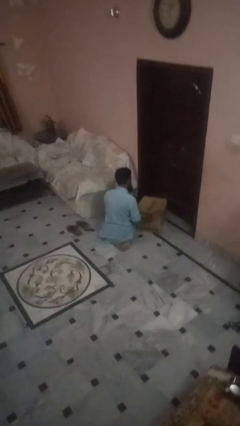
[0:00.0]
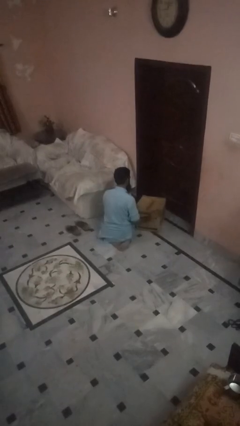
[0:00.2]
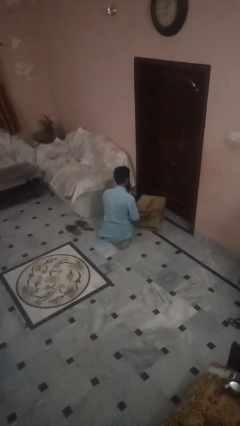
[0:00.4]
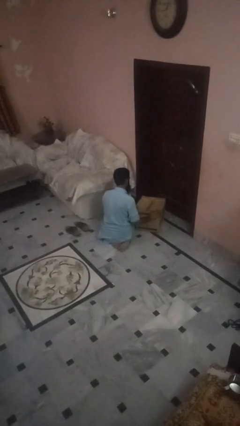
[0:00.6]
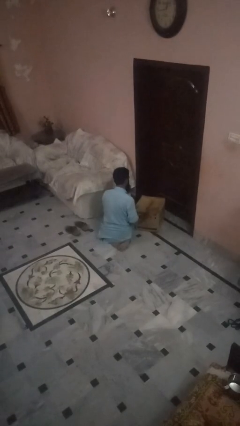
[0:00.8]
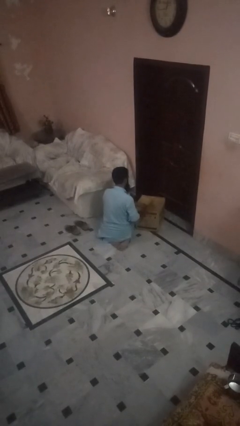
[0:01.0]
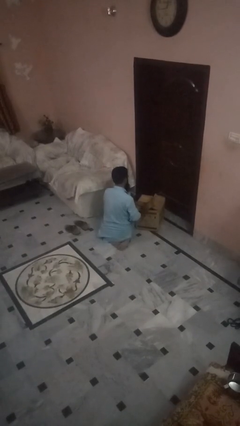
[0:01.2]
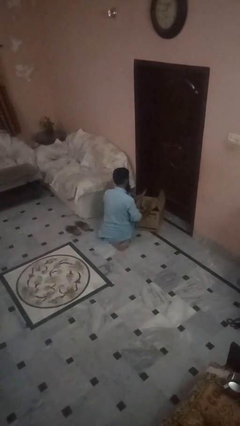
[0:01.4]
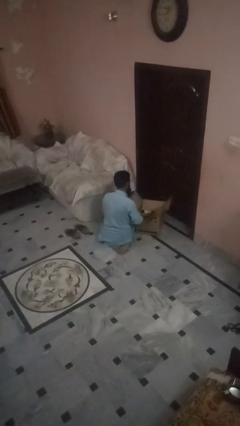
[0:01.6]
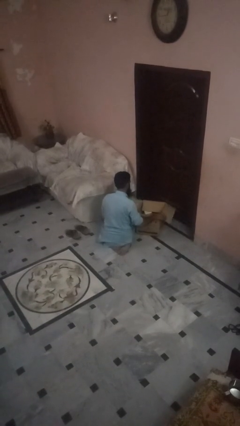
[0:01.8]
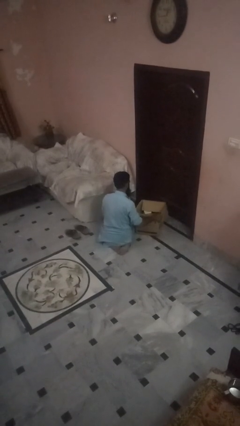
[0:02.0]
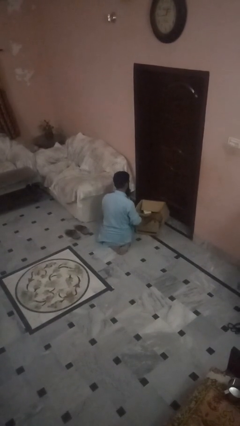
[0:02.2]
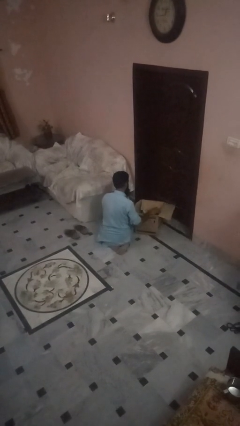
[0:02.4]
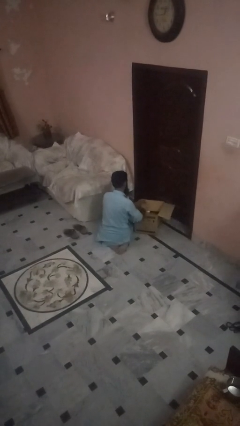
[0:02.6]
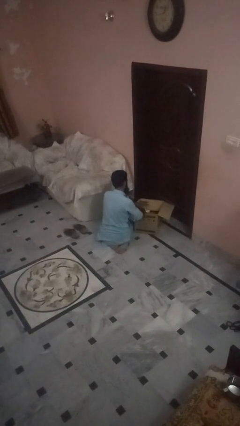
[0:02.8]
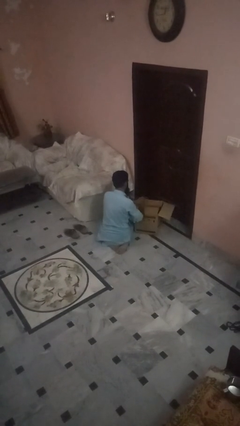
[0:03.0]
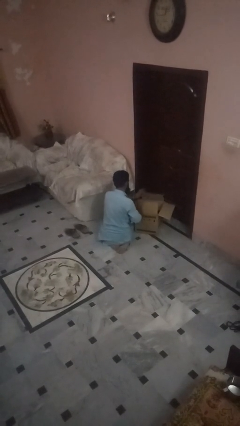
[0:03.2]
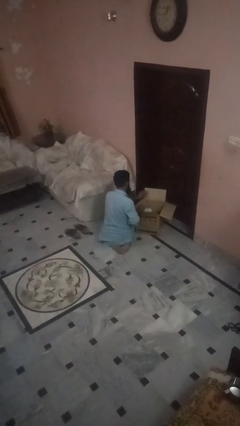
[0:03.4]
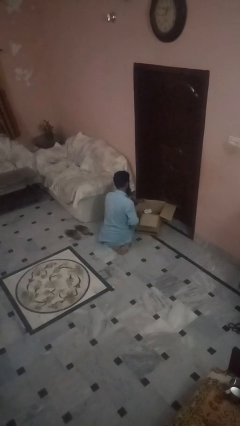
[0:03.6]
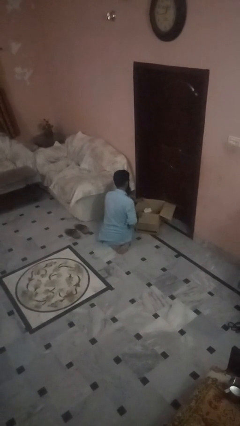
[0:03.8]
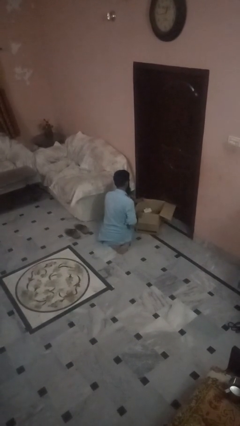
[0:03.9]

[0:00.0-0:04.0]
person opens box

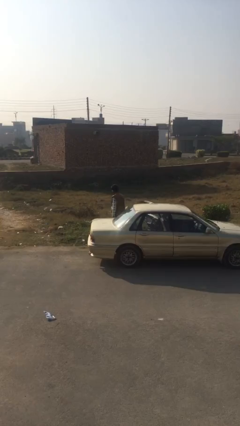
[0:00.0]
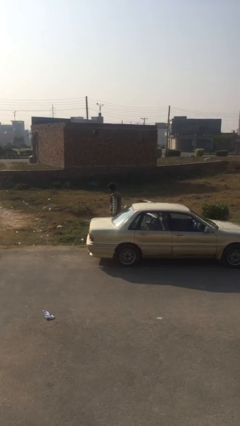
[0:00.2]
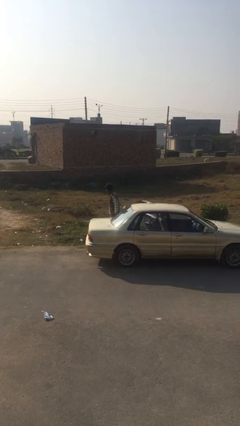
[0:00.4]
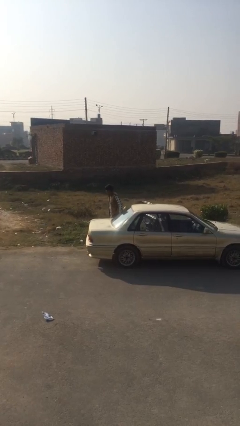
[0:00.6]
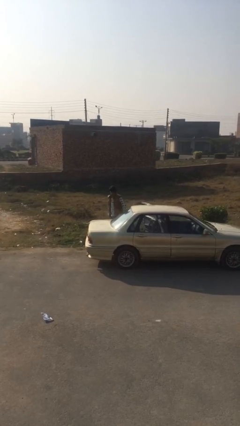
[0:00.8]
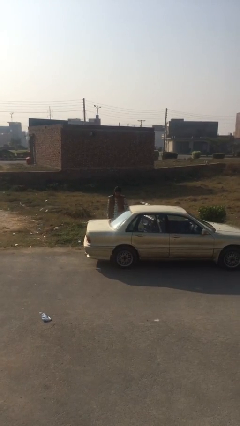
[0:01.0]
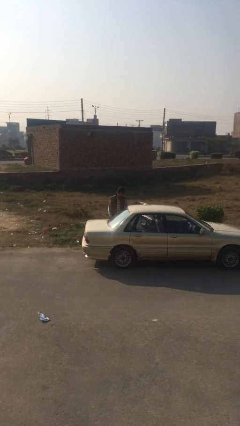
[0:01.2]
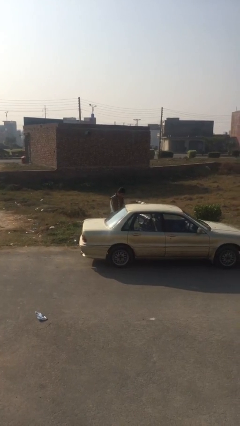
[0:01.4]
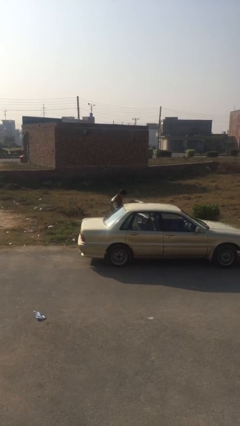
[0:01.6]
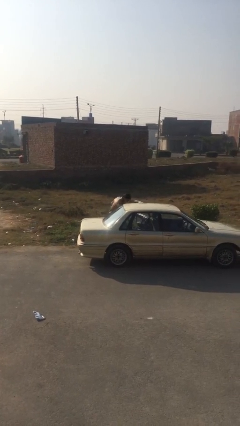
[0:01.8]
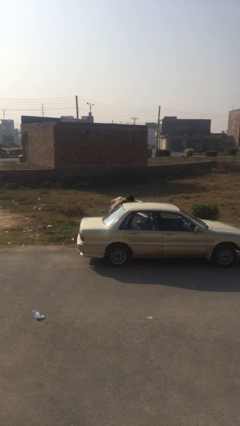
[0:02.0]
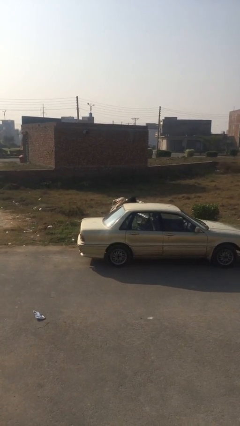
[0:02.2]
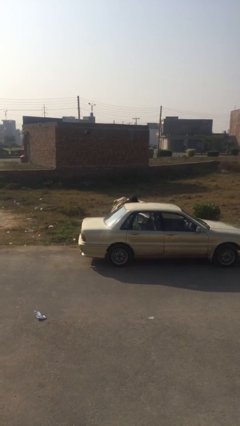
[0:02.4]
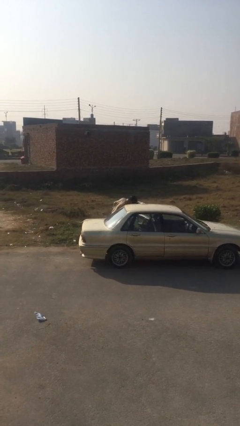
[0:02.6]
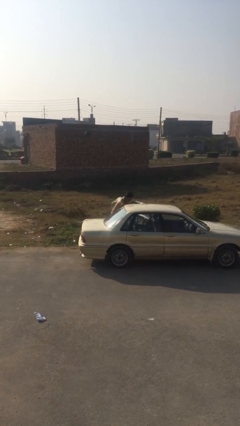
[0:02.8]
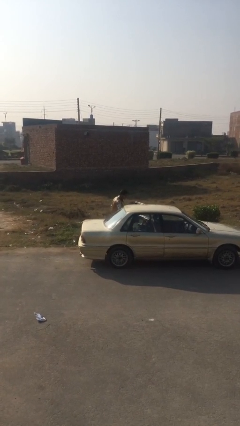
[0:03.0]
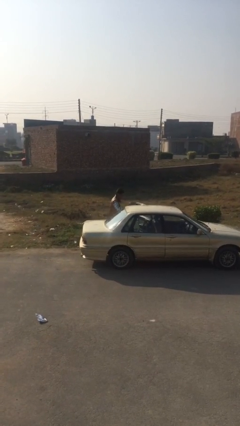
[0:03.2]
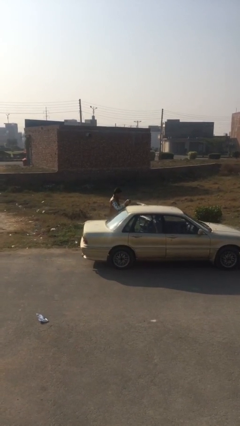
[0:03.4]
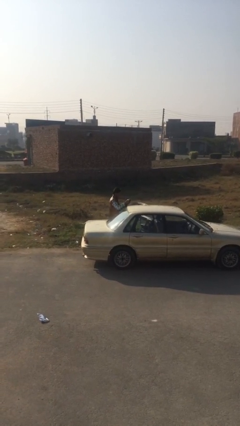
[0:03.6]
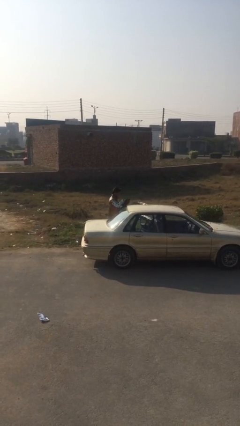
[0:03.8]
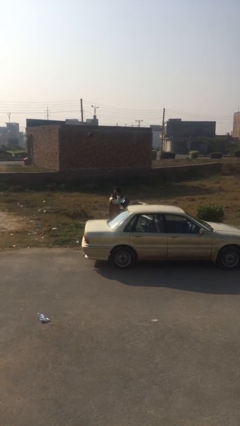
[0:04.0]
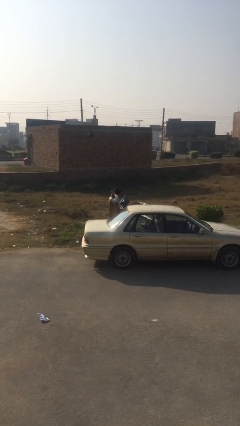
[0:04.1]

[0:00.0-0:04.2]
person unloads car

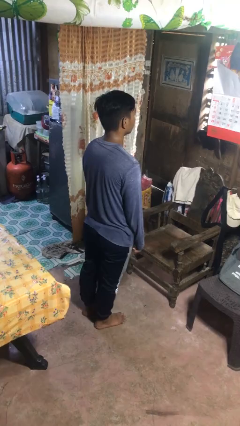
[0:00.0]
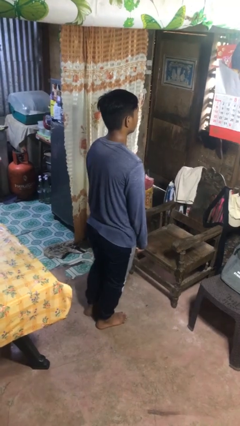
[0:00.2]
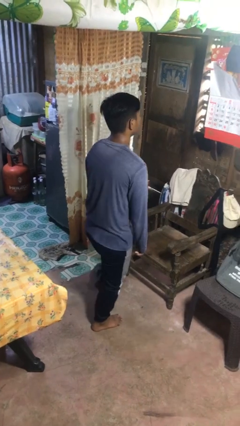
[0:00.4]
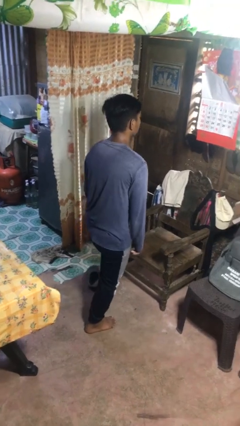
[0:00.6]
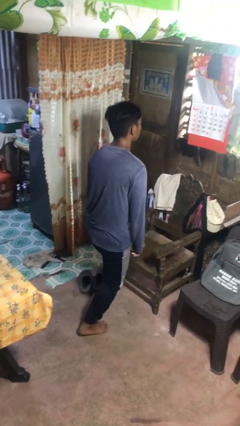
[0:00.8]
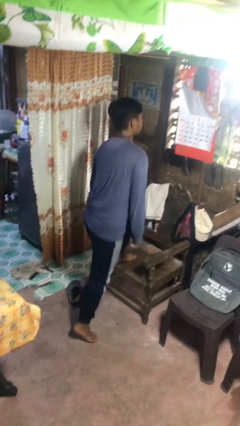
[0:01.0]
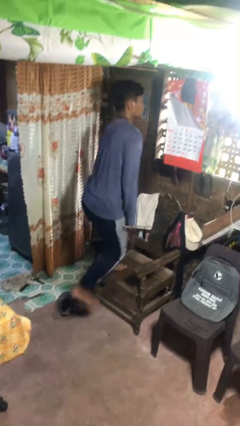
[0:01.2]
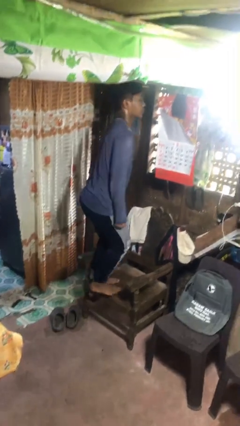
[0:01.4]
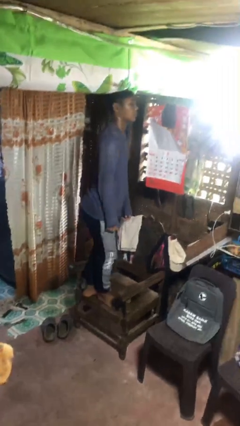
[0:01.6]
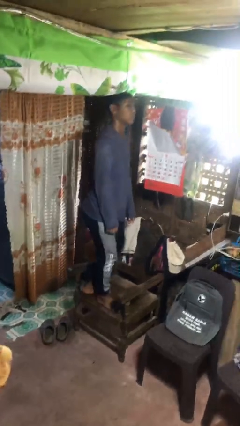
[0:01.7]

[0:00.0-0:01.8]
person climbs on chair

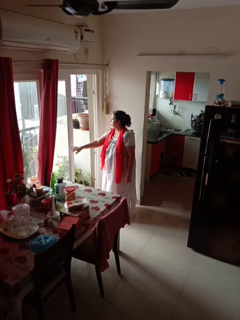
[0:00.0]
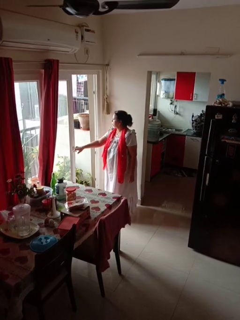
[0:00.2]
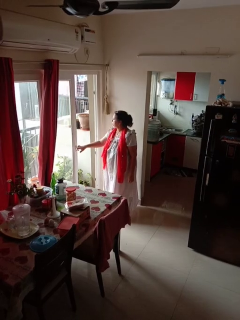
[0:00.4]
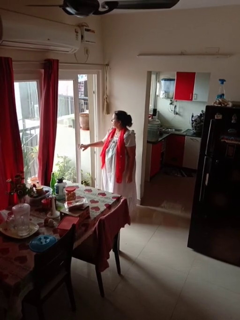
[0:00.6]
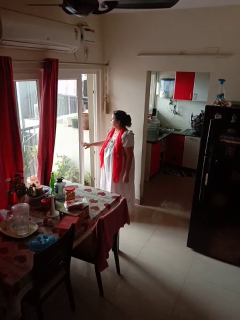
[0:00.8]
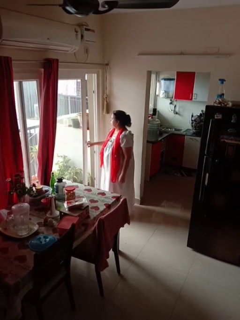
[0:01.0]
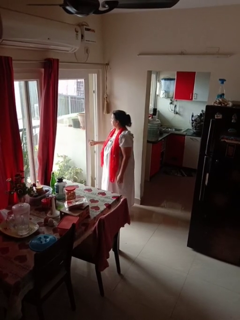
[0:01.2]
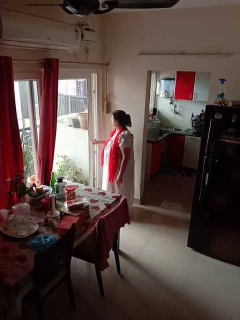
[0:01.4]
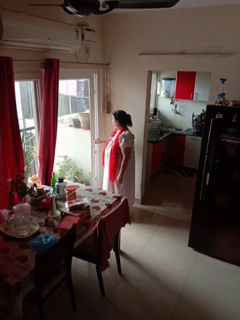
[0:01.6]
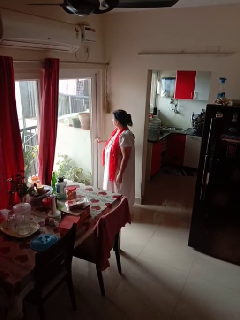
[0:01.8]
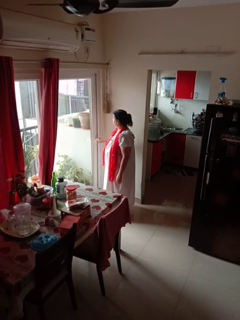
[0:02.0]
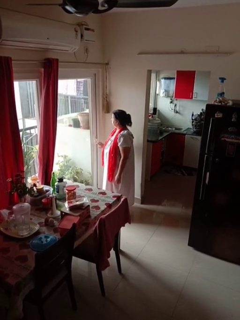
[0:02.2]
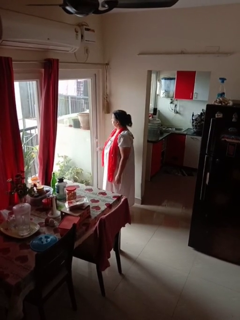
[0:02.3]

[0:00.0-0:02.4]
person closes sliding door

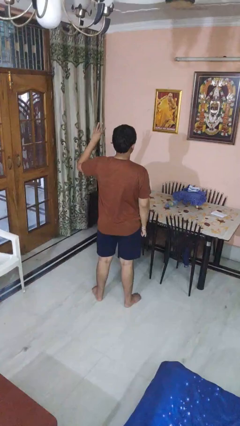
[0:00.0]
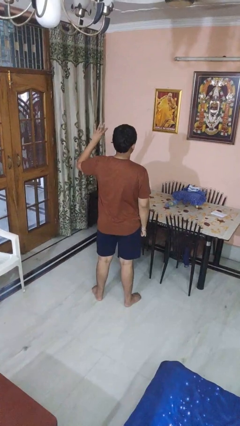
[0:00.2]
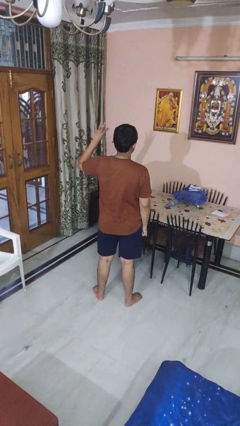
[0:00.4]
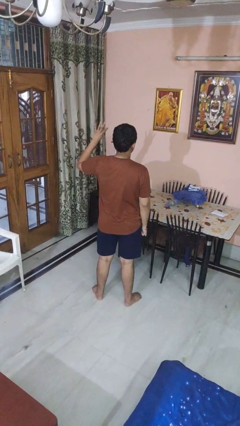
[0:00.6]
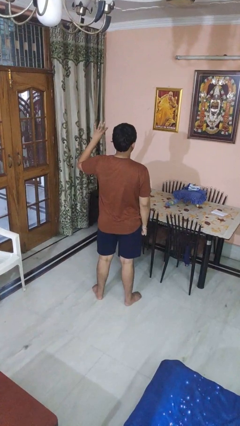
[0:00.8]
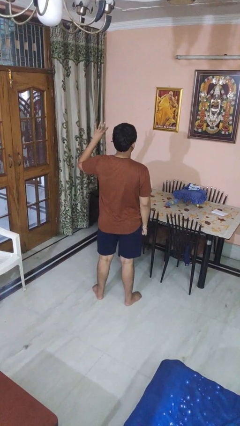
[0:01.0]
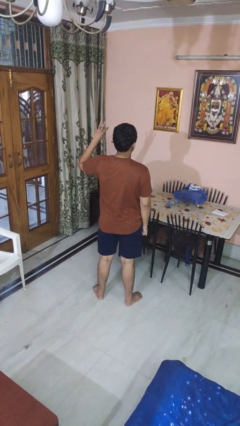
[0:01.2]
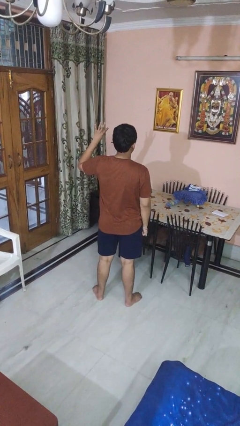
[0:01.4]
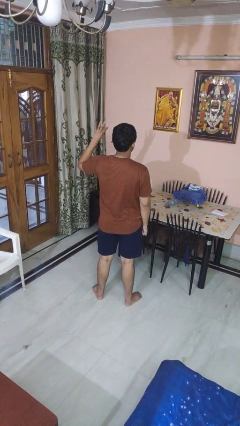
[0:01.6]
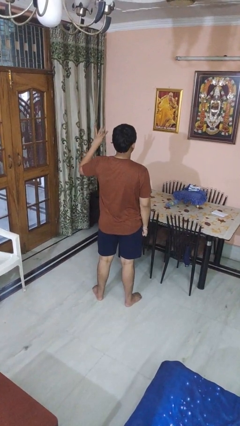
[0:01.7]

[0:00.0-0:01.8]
person gestures number four

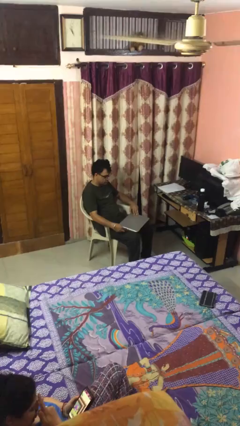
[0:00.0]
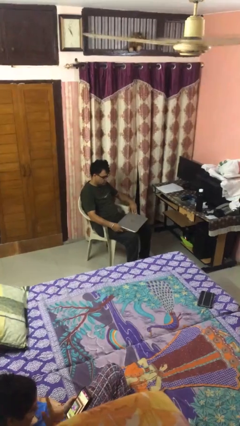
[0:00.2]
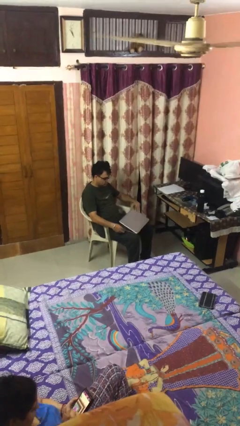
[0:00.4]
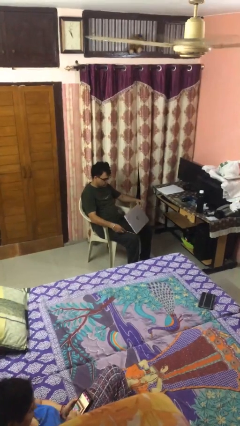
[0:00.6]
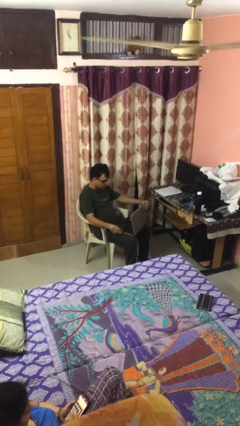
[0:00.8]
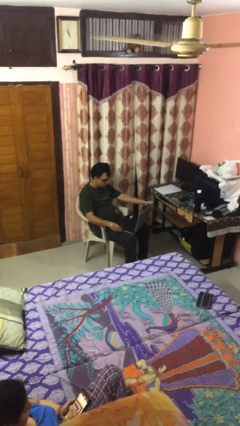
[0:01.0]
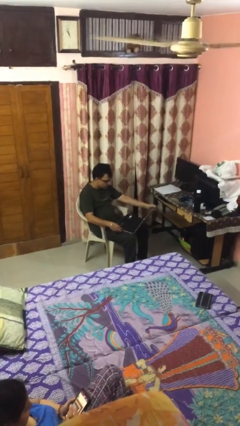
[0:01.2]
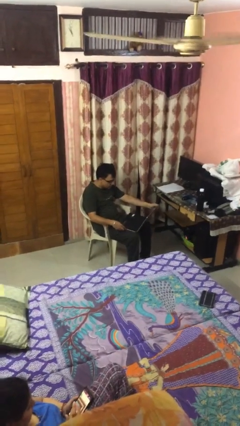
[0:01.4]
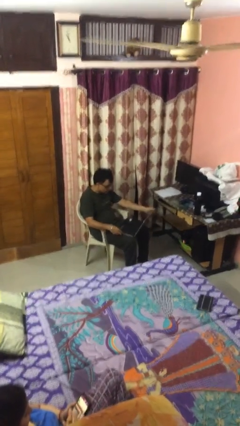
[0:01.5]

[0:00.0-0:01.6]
person opens laptop

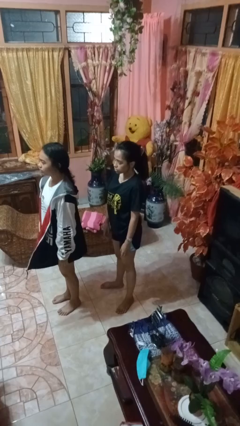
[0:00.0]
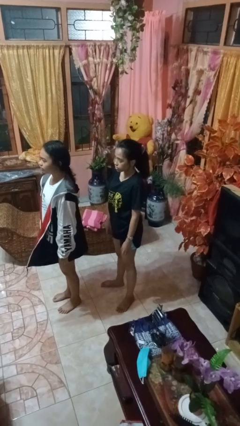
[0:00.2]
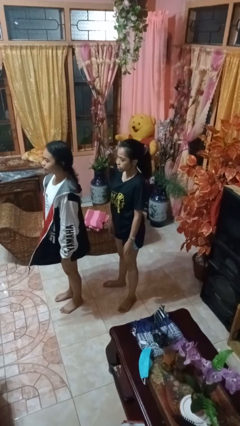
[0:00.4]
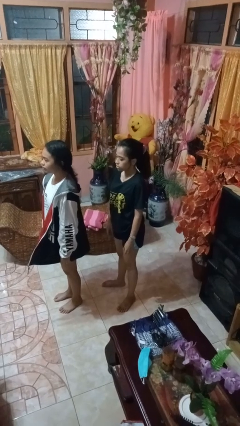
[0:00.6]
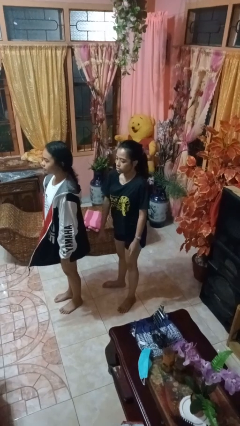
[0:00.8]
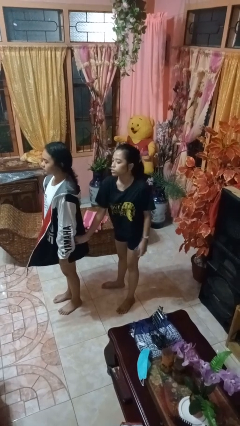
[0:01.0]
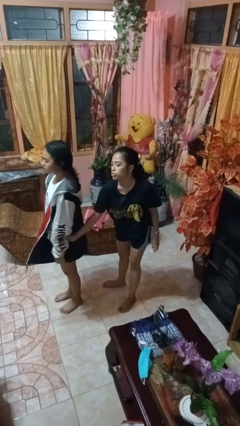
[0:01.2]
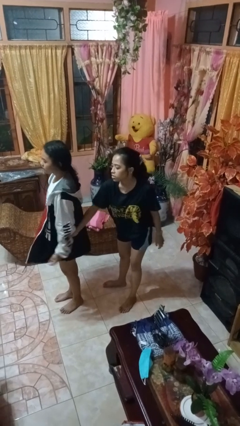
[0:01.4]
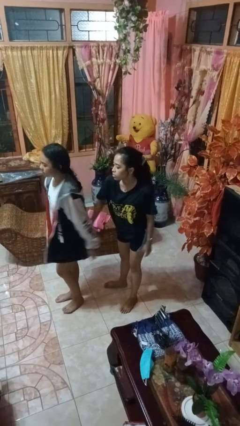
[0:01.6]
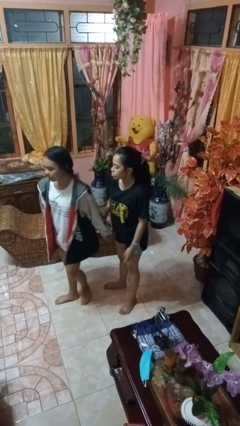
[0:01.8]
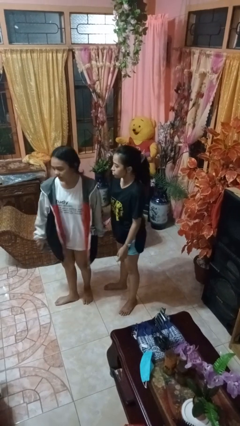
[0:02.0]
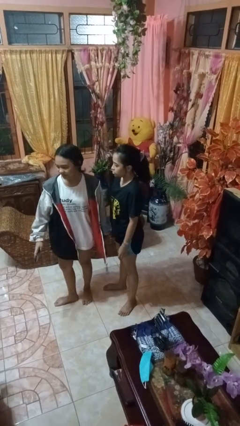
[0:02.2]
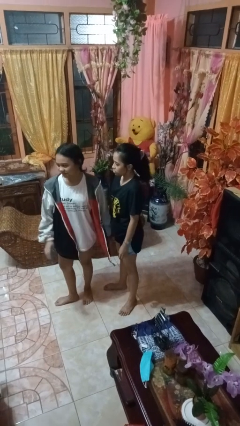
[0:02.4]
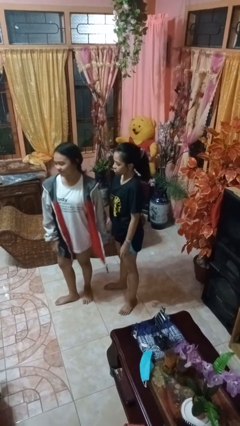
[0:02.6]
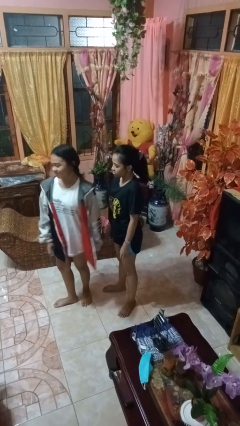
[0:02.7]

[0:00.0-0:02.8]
person grabs person by forearm
